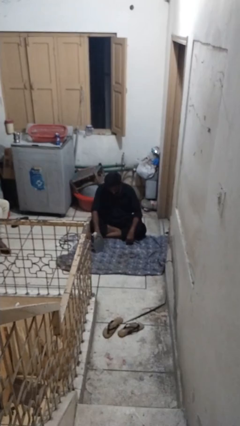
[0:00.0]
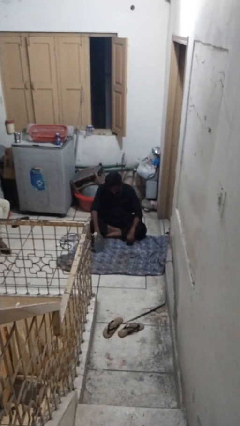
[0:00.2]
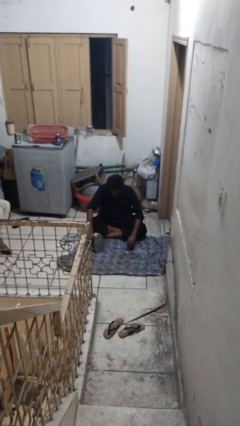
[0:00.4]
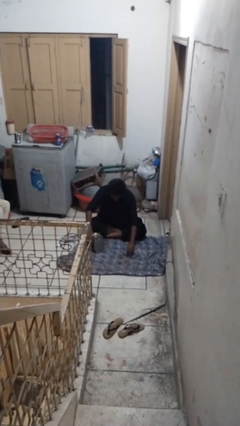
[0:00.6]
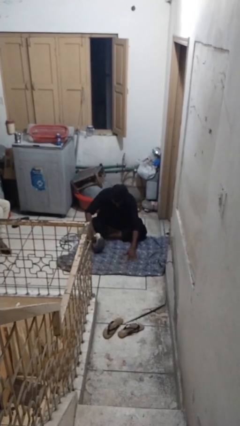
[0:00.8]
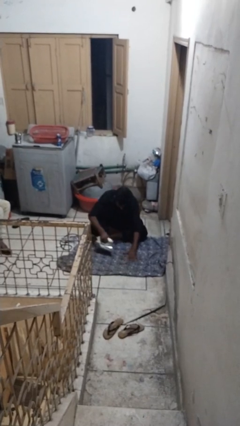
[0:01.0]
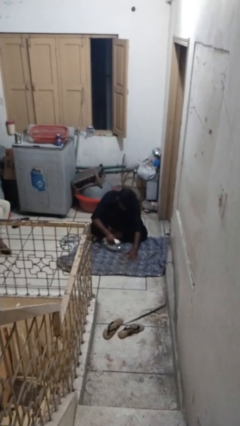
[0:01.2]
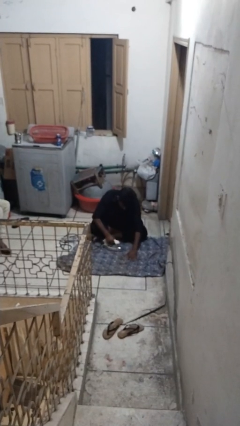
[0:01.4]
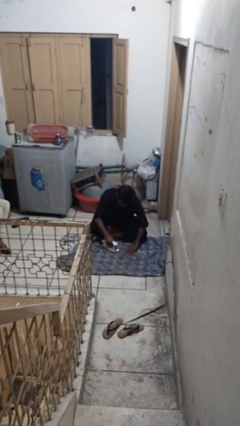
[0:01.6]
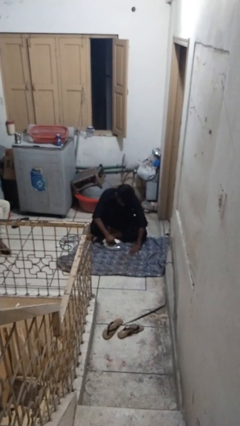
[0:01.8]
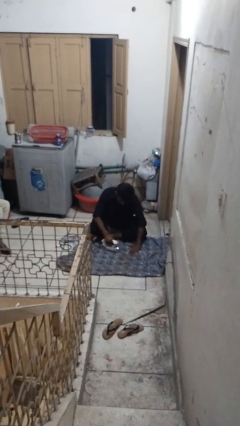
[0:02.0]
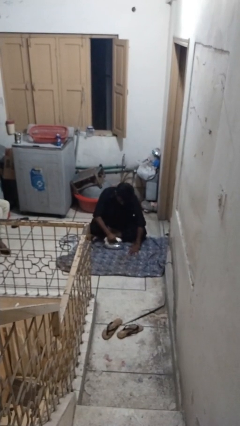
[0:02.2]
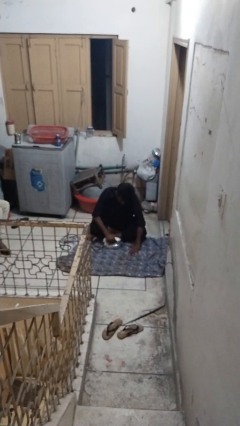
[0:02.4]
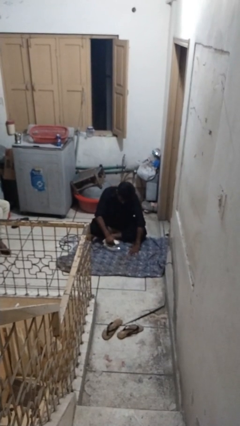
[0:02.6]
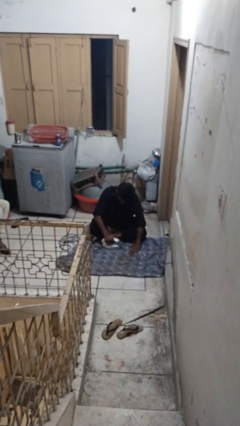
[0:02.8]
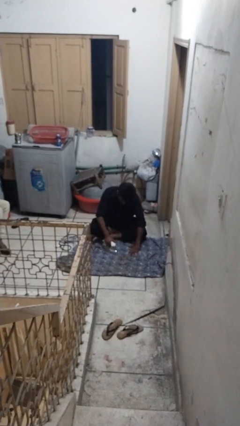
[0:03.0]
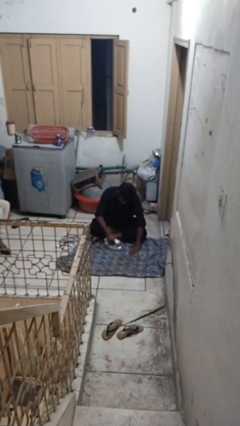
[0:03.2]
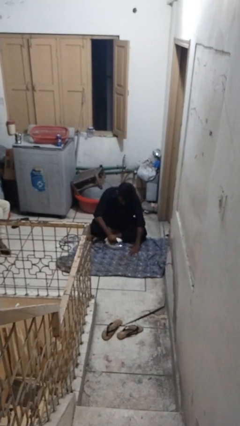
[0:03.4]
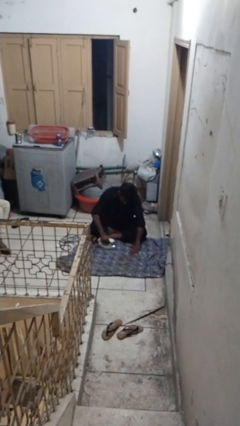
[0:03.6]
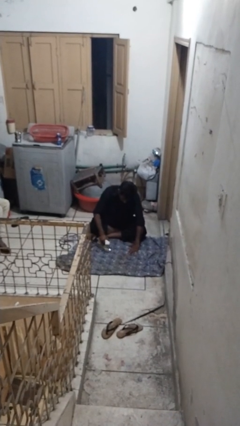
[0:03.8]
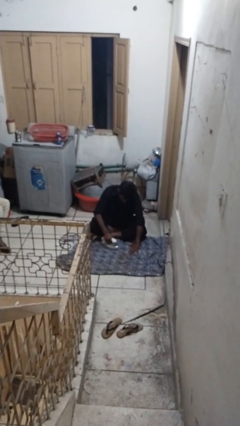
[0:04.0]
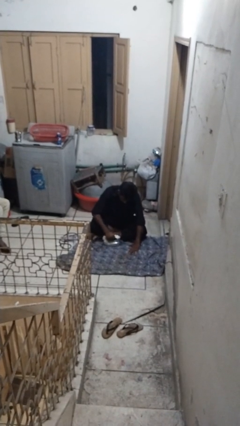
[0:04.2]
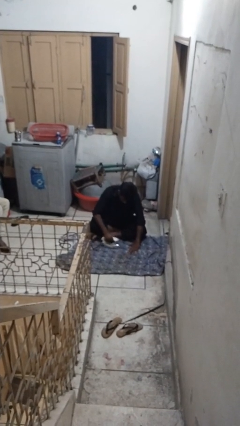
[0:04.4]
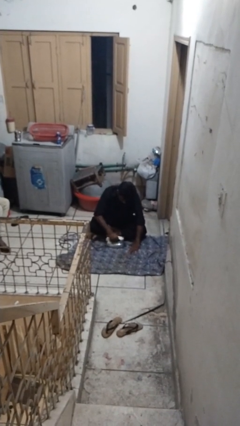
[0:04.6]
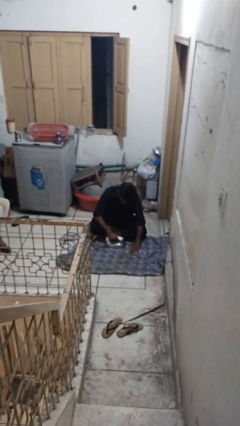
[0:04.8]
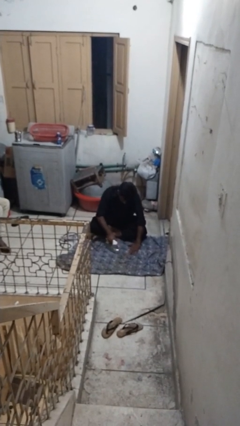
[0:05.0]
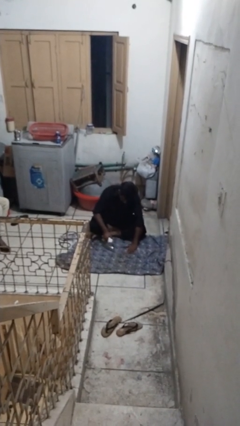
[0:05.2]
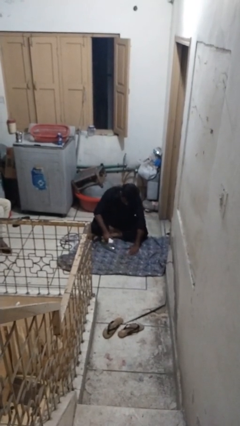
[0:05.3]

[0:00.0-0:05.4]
person irons clothes

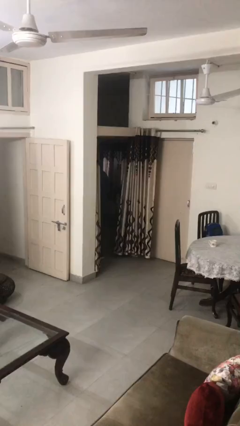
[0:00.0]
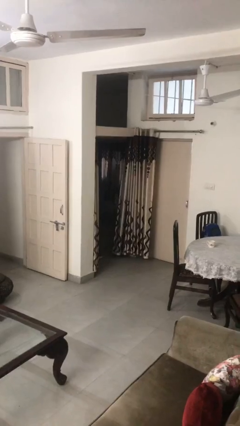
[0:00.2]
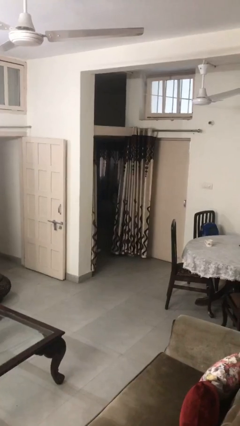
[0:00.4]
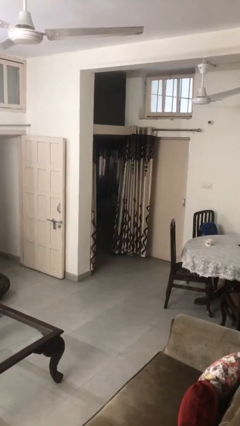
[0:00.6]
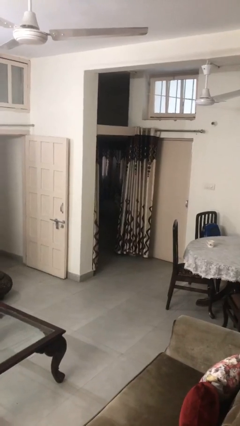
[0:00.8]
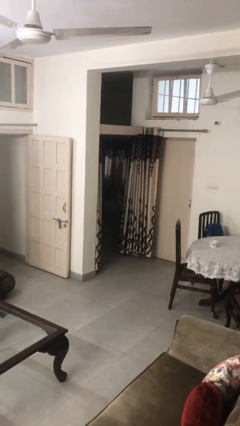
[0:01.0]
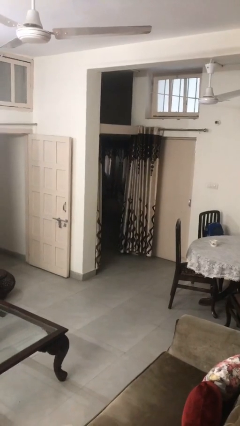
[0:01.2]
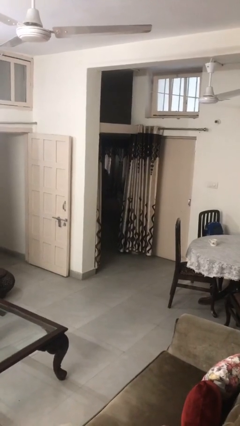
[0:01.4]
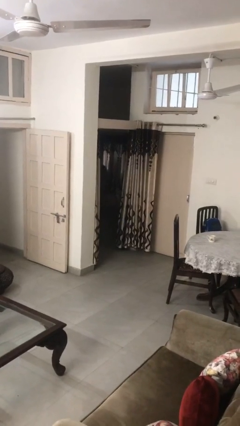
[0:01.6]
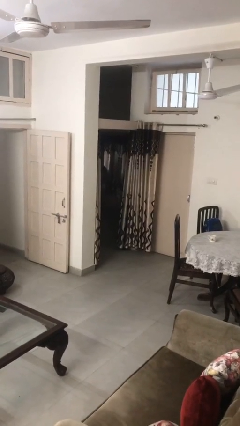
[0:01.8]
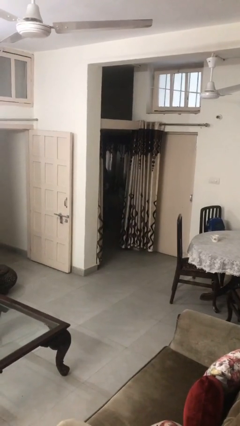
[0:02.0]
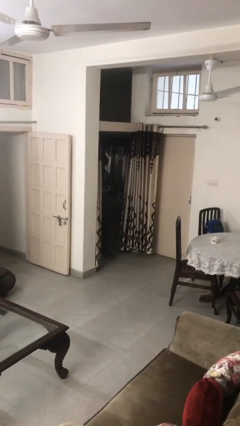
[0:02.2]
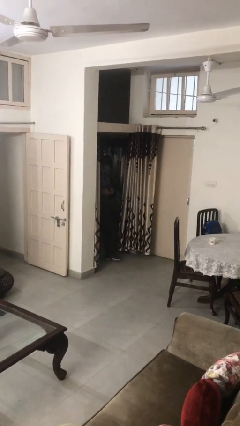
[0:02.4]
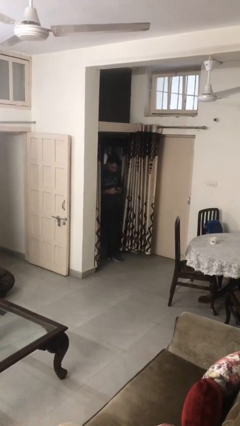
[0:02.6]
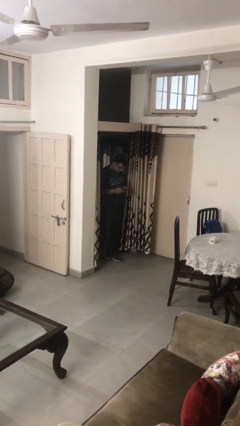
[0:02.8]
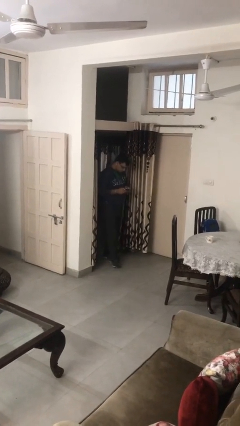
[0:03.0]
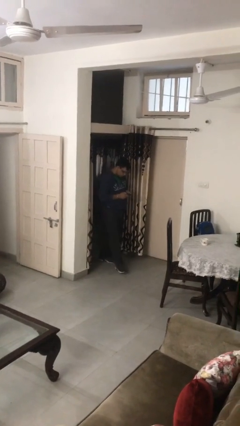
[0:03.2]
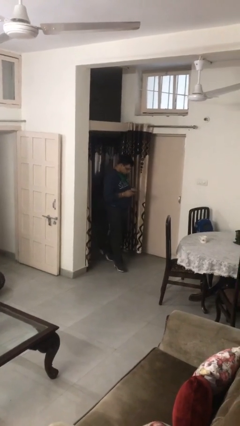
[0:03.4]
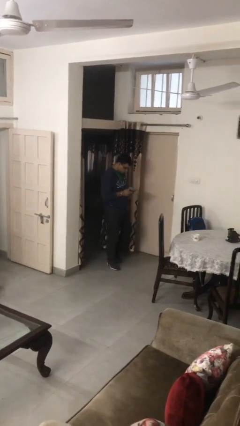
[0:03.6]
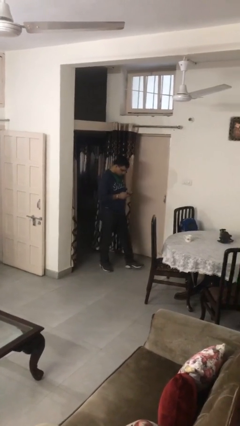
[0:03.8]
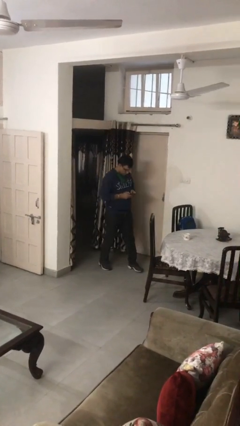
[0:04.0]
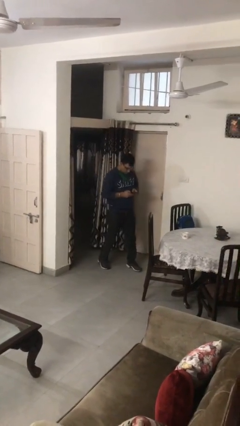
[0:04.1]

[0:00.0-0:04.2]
person enters scene through structure

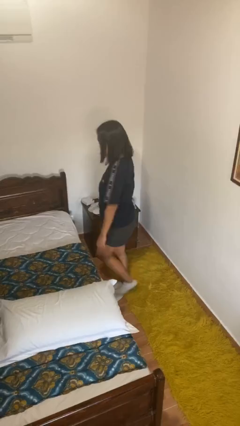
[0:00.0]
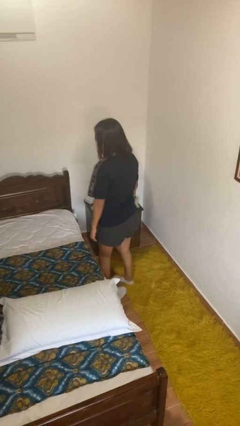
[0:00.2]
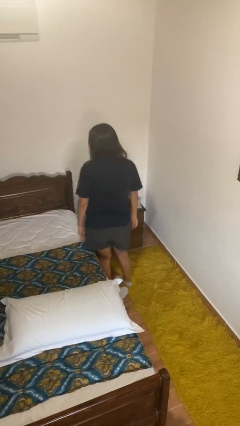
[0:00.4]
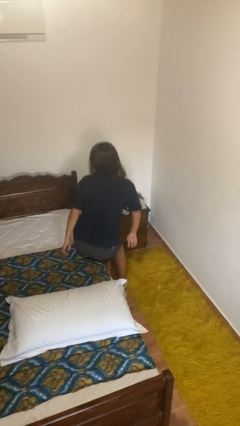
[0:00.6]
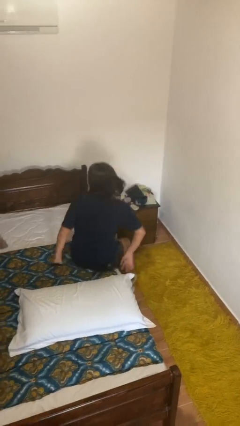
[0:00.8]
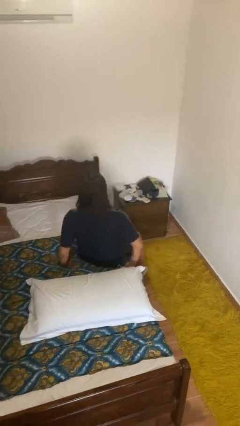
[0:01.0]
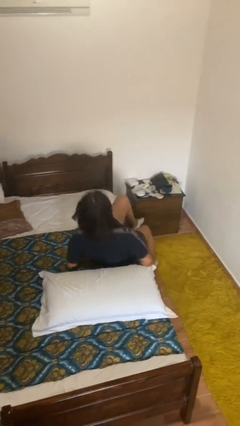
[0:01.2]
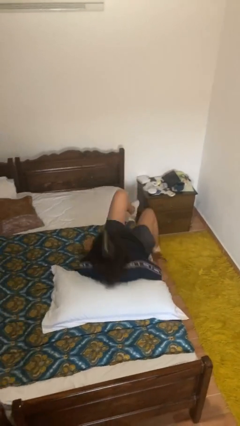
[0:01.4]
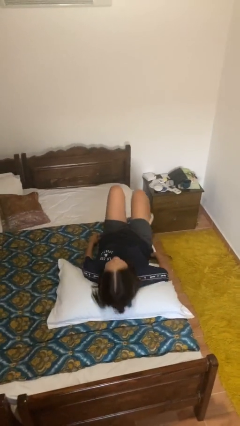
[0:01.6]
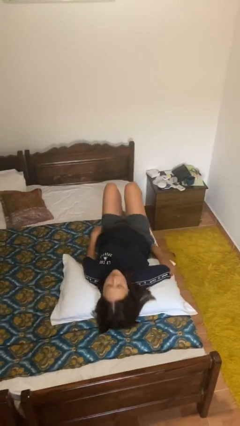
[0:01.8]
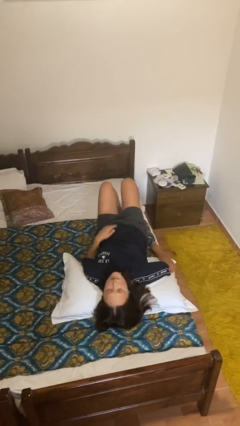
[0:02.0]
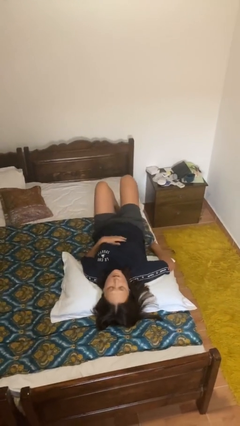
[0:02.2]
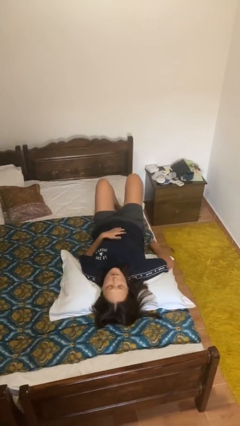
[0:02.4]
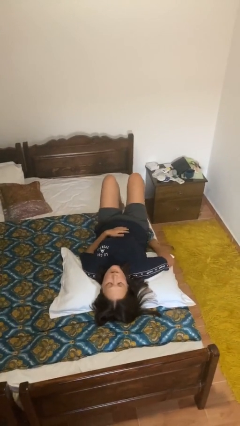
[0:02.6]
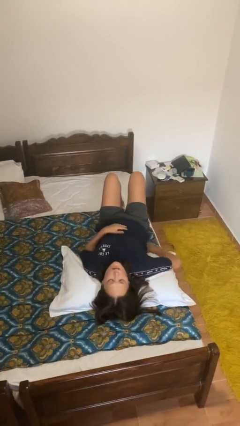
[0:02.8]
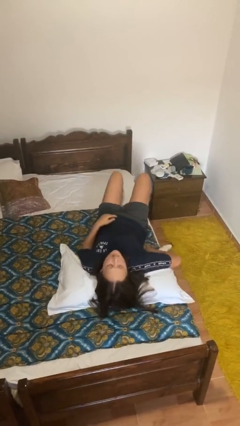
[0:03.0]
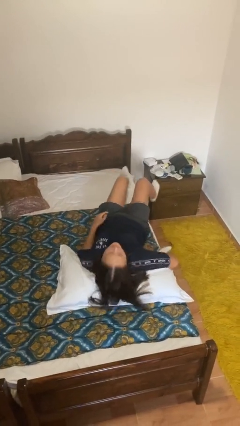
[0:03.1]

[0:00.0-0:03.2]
person lies down on bed

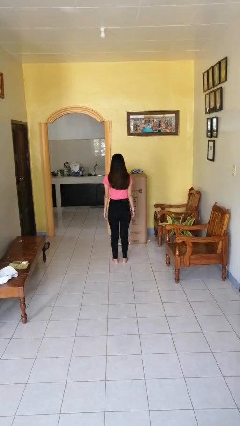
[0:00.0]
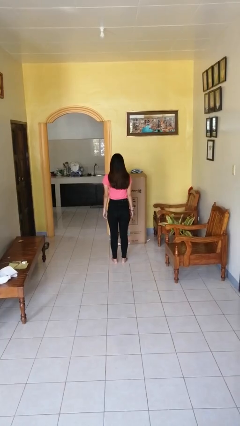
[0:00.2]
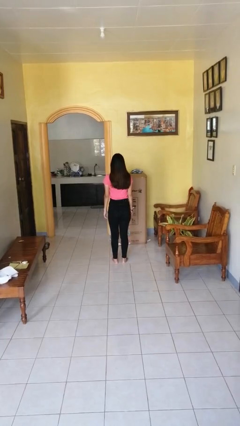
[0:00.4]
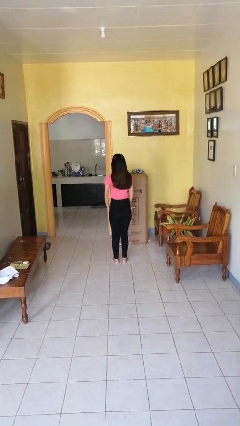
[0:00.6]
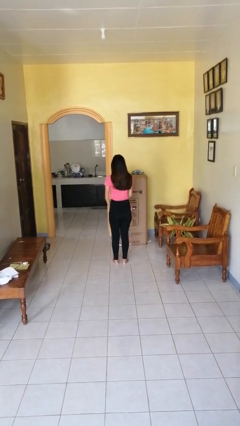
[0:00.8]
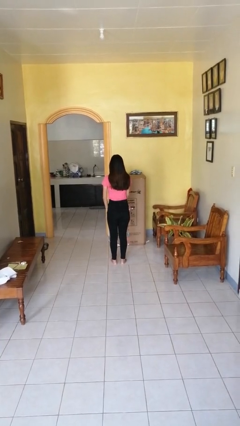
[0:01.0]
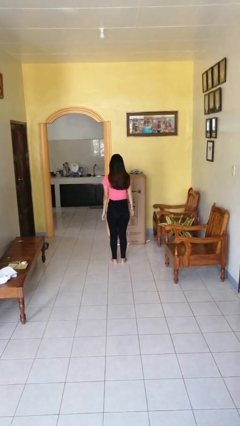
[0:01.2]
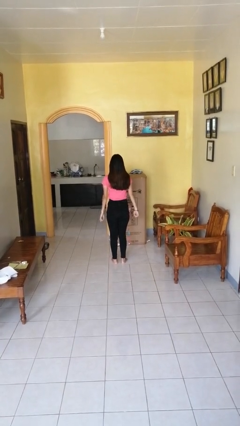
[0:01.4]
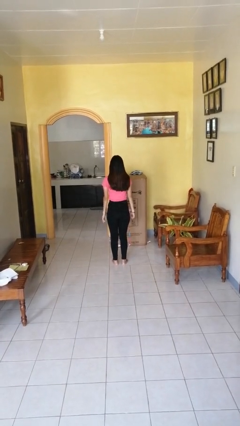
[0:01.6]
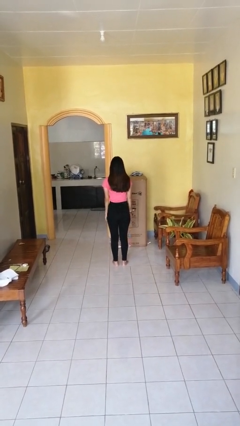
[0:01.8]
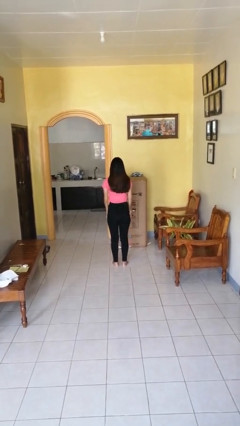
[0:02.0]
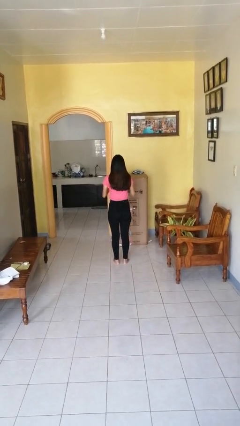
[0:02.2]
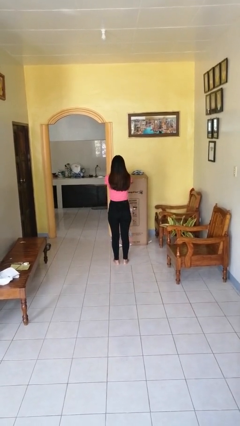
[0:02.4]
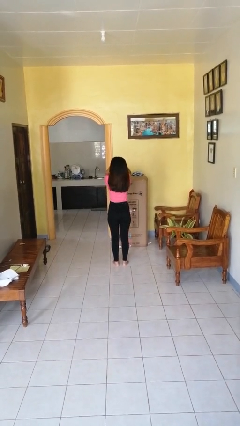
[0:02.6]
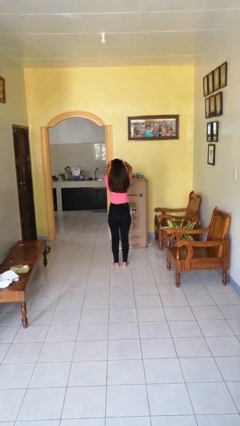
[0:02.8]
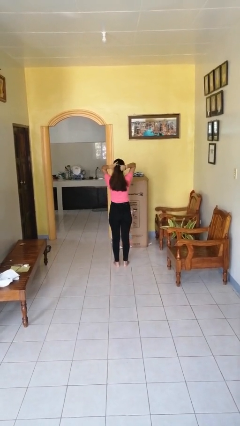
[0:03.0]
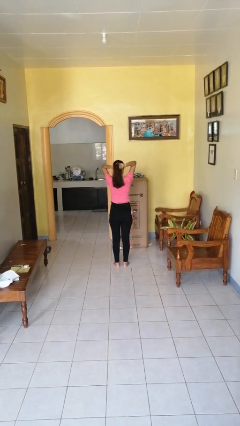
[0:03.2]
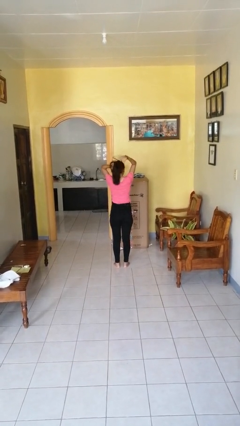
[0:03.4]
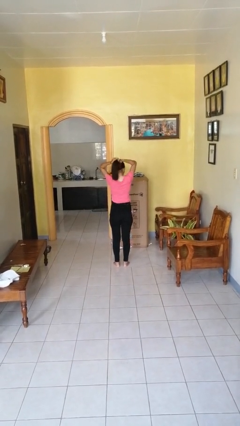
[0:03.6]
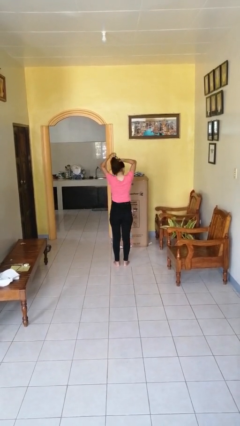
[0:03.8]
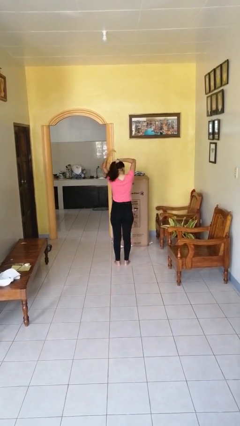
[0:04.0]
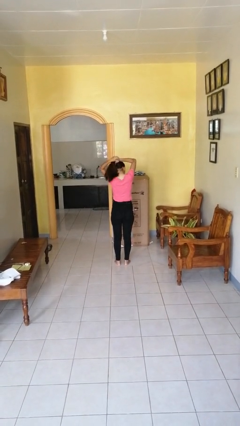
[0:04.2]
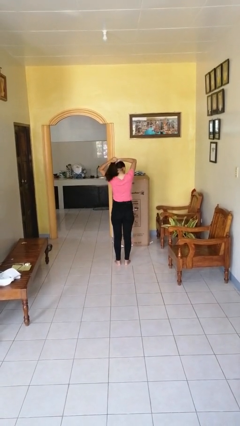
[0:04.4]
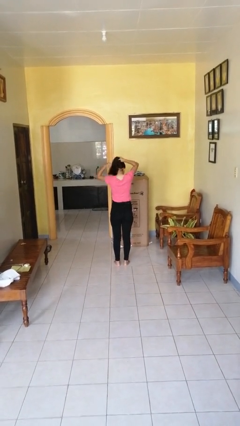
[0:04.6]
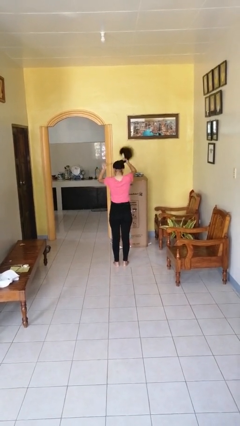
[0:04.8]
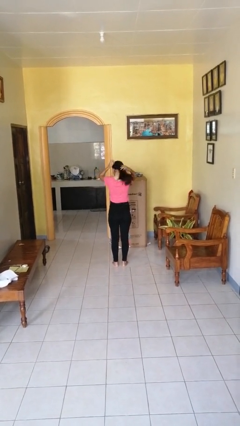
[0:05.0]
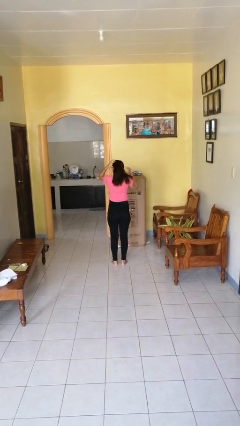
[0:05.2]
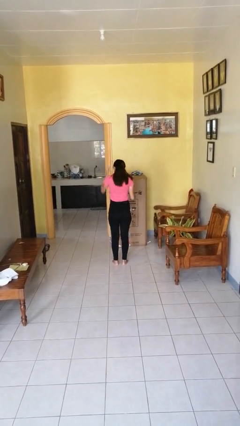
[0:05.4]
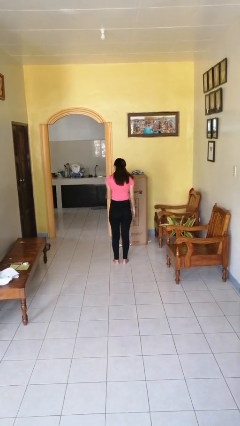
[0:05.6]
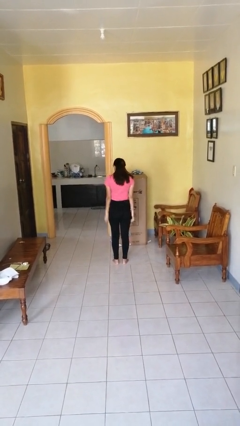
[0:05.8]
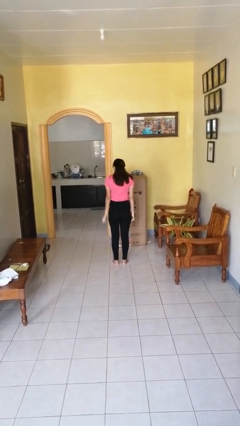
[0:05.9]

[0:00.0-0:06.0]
person puts hair in ponytail
